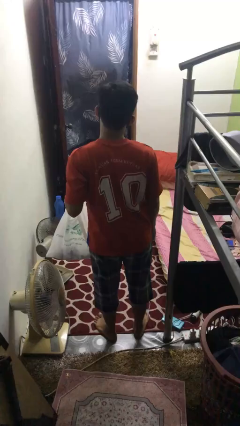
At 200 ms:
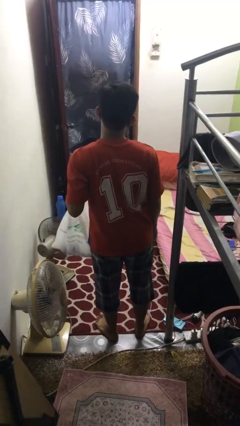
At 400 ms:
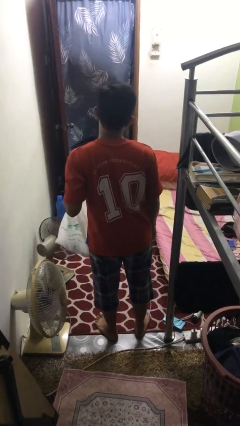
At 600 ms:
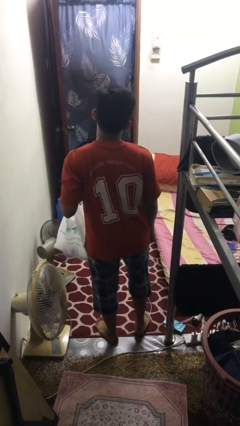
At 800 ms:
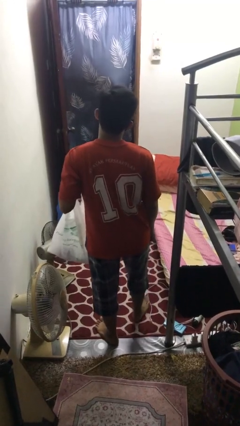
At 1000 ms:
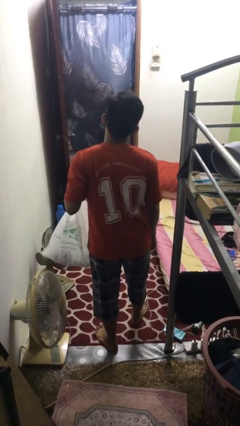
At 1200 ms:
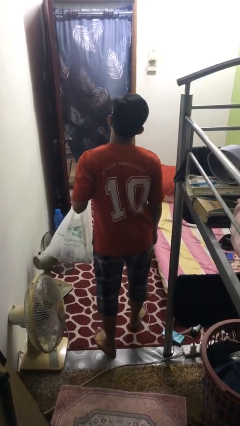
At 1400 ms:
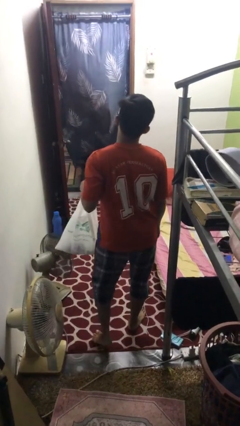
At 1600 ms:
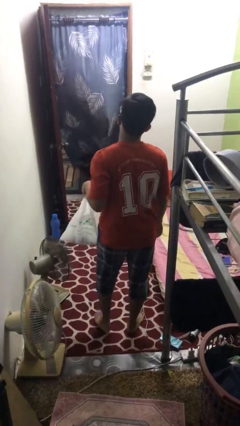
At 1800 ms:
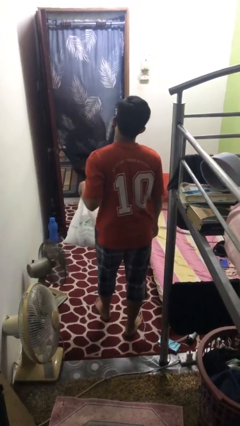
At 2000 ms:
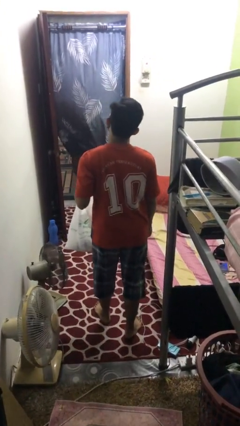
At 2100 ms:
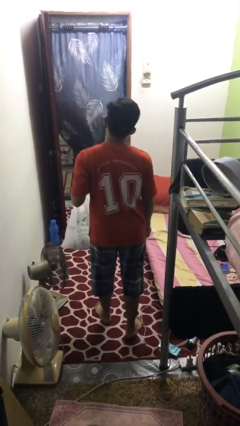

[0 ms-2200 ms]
person carries groceries

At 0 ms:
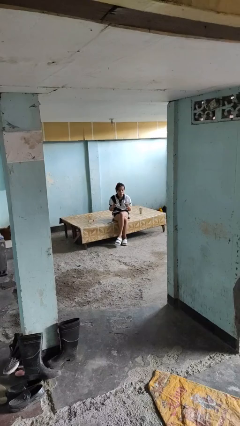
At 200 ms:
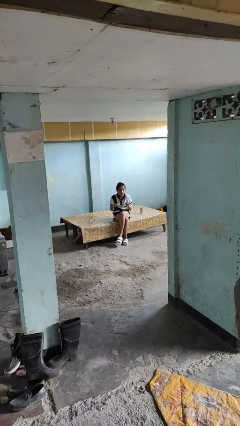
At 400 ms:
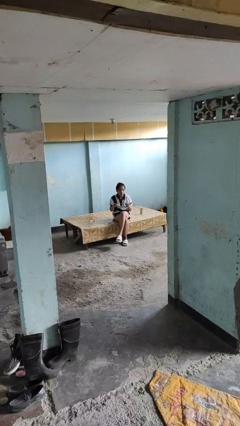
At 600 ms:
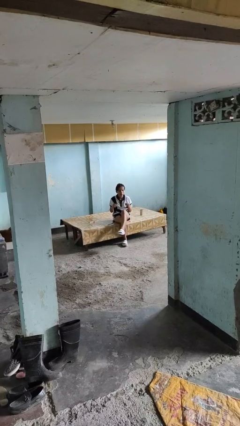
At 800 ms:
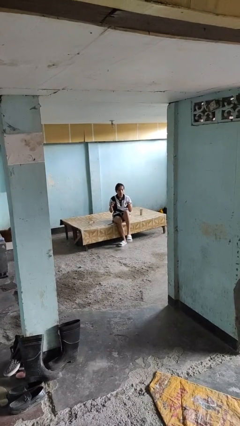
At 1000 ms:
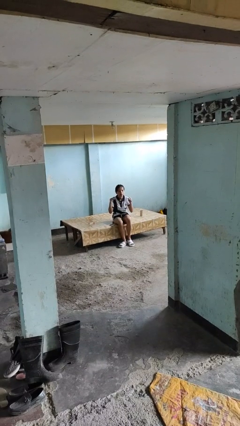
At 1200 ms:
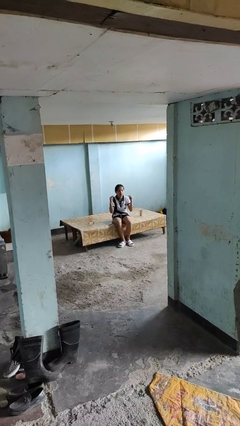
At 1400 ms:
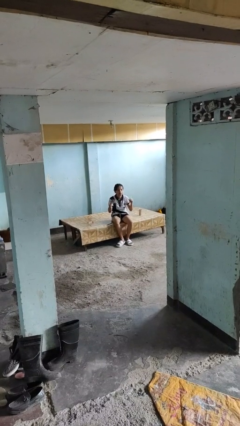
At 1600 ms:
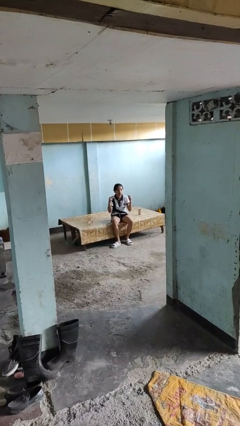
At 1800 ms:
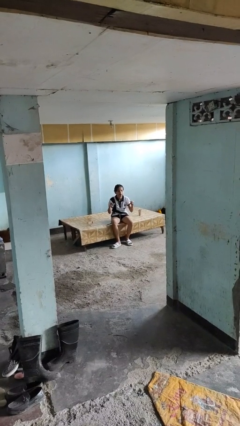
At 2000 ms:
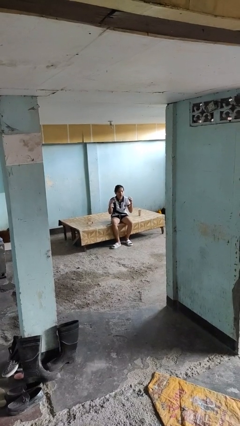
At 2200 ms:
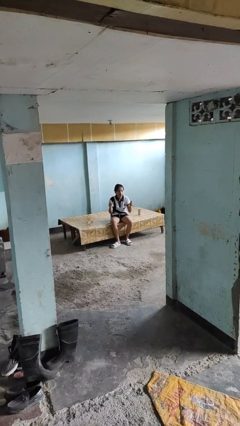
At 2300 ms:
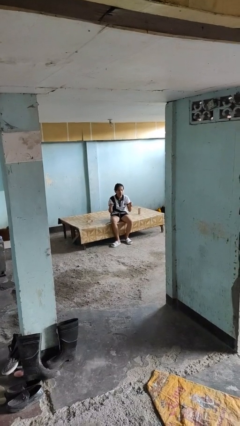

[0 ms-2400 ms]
person snaps fingers

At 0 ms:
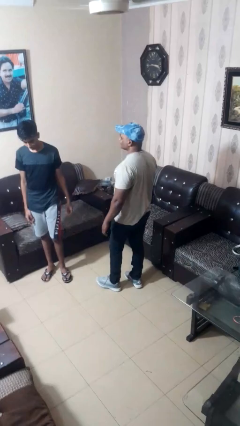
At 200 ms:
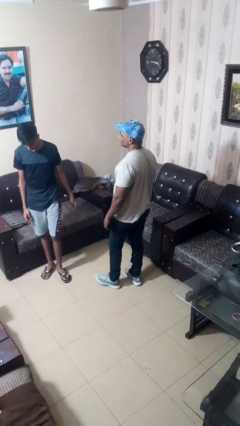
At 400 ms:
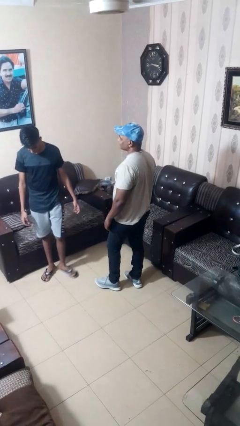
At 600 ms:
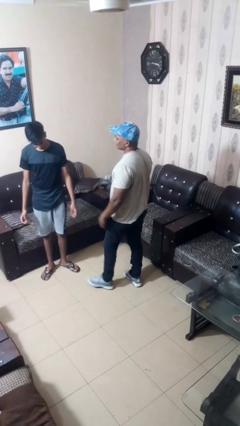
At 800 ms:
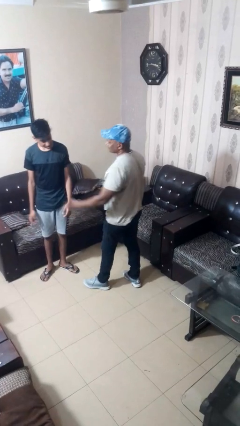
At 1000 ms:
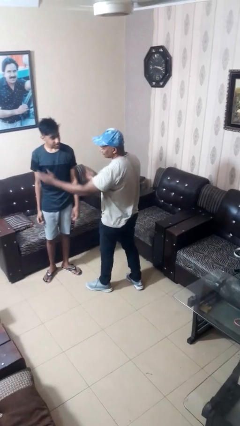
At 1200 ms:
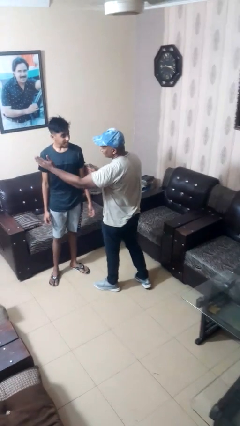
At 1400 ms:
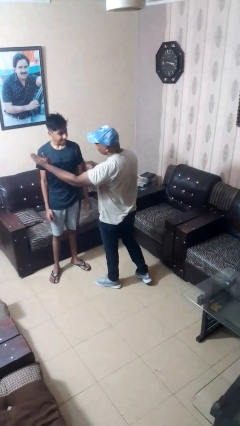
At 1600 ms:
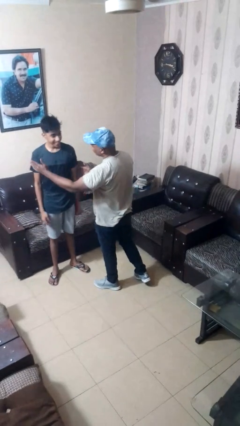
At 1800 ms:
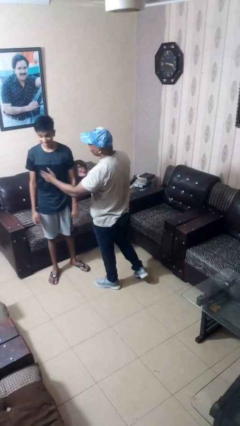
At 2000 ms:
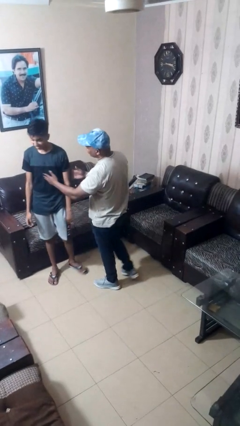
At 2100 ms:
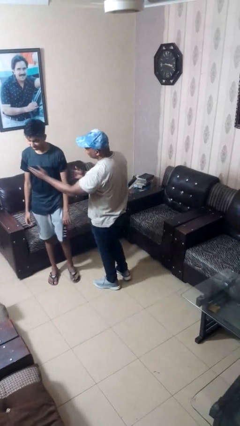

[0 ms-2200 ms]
person shoves person

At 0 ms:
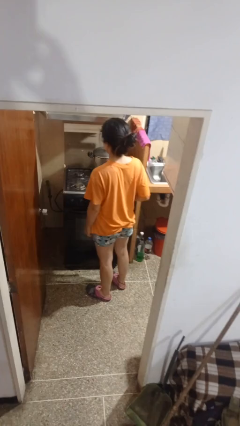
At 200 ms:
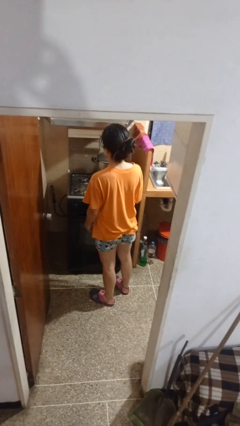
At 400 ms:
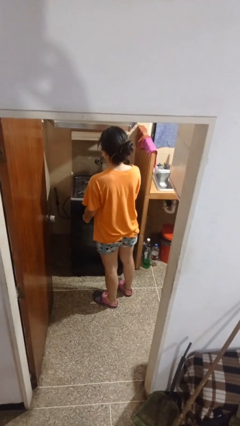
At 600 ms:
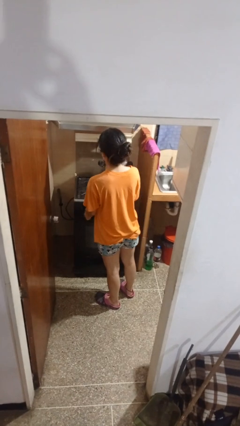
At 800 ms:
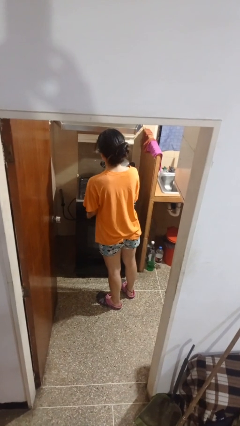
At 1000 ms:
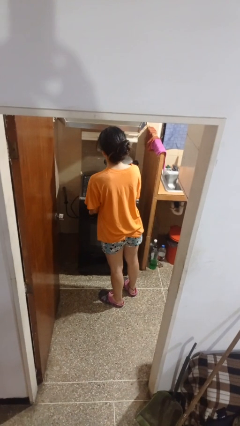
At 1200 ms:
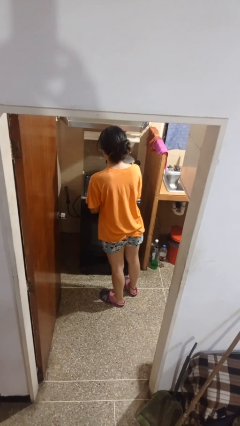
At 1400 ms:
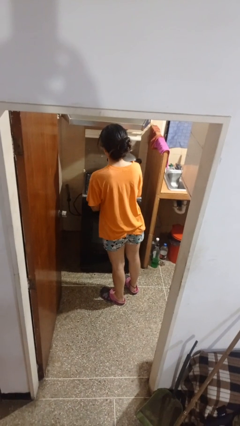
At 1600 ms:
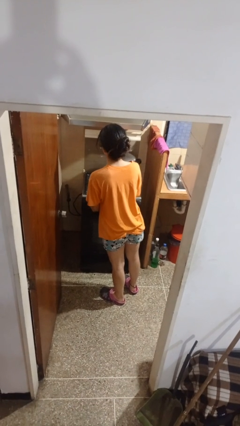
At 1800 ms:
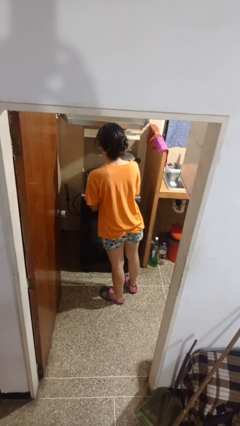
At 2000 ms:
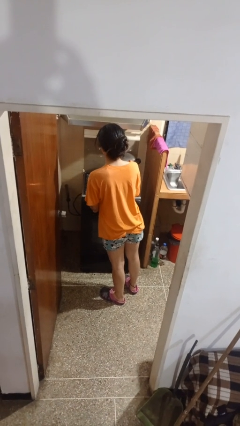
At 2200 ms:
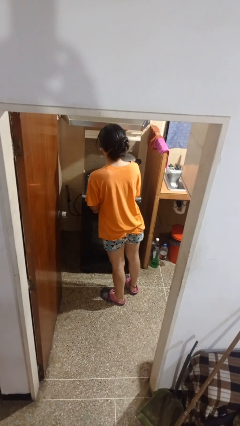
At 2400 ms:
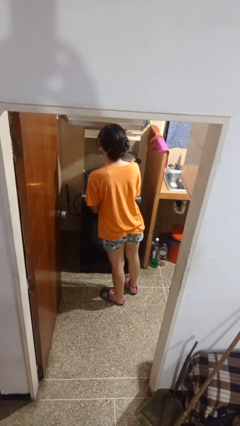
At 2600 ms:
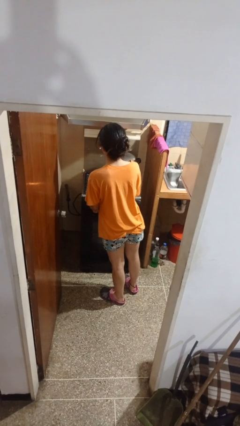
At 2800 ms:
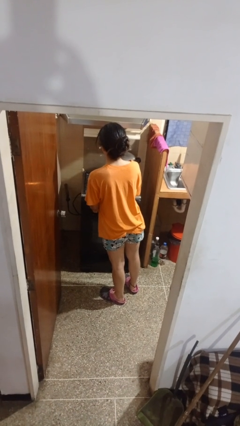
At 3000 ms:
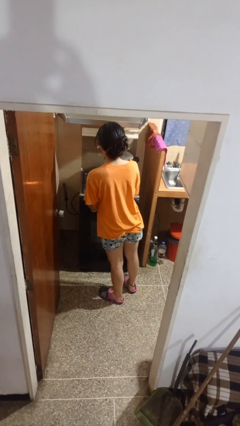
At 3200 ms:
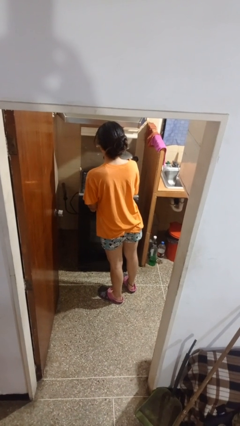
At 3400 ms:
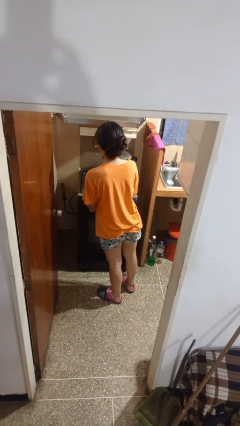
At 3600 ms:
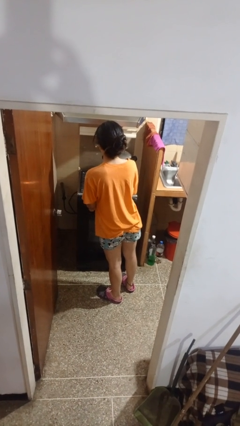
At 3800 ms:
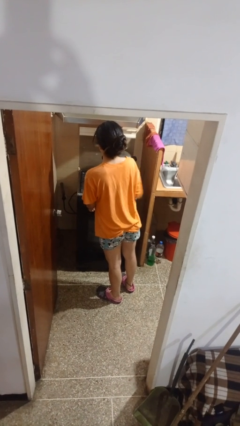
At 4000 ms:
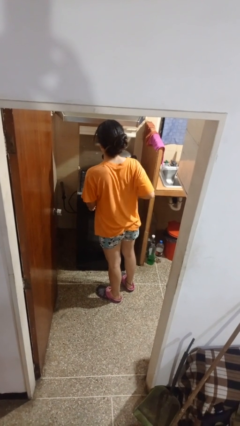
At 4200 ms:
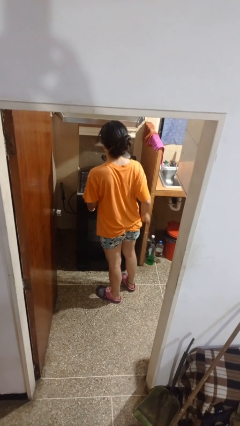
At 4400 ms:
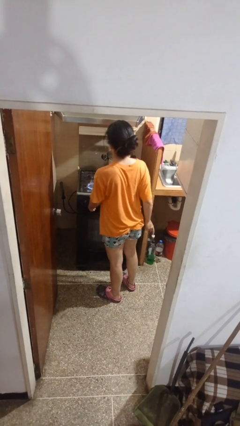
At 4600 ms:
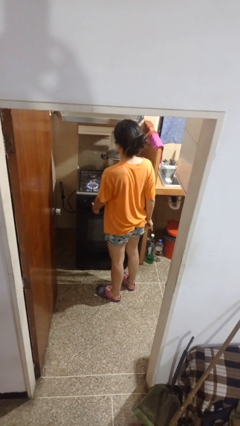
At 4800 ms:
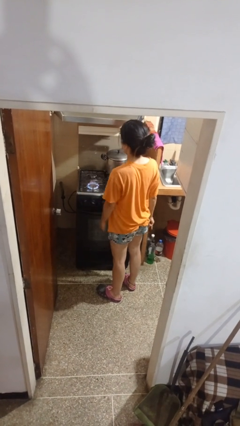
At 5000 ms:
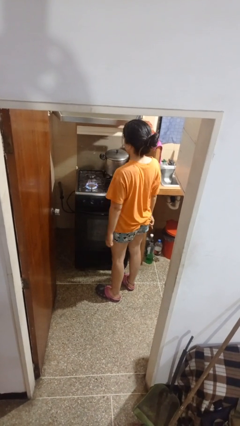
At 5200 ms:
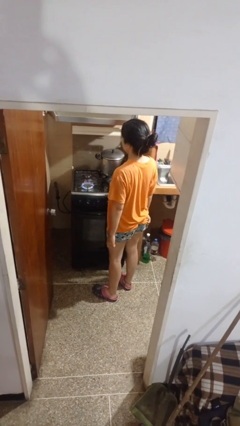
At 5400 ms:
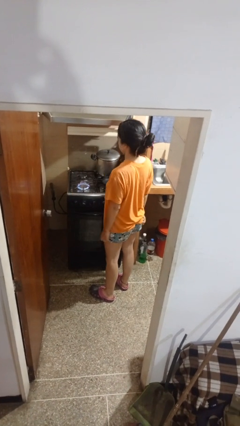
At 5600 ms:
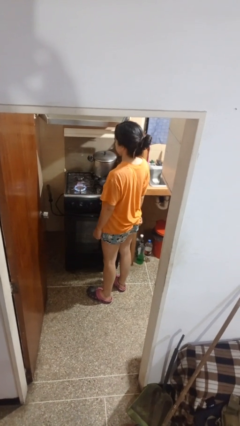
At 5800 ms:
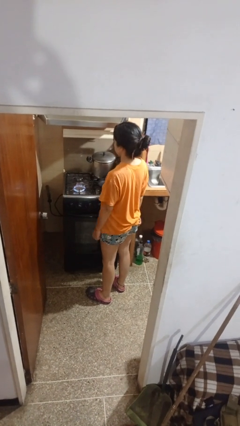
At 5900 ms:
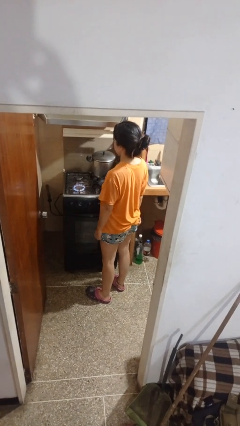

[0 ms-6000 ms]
person turns on stovetop

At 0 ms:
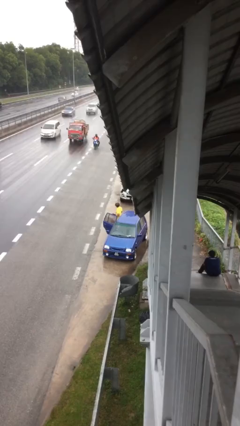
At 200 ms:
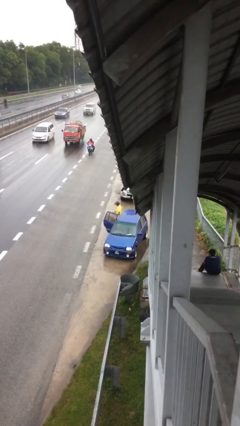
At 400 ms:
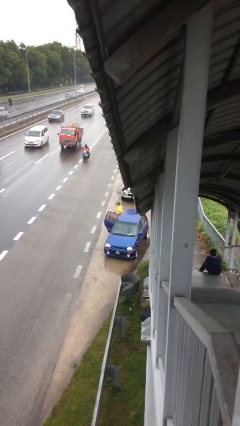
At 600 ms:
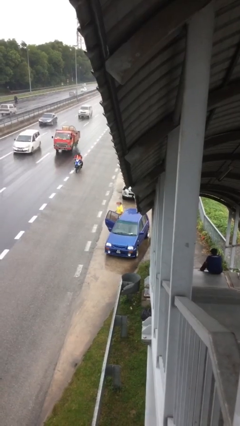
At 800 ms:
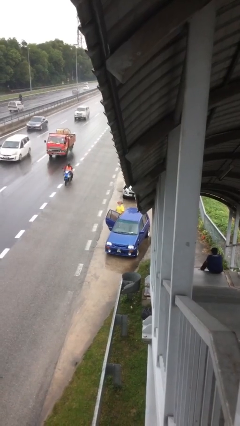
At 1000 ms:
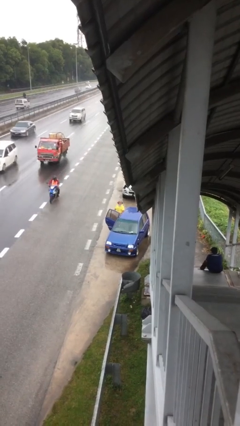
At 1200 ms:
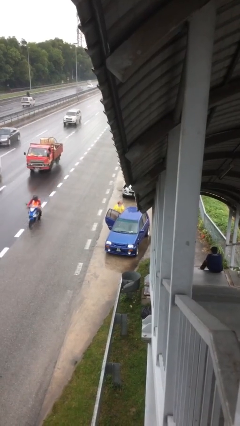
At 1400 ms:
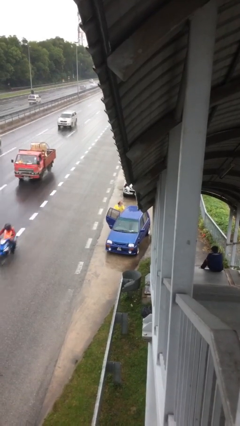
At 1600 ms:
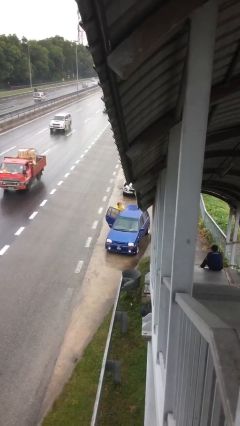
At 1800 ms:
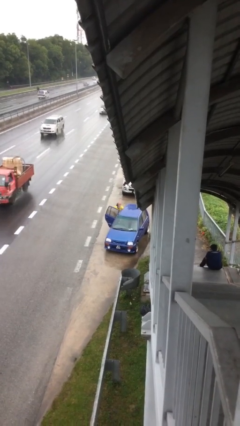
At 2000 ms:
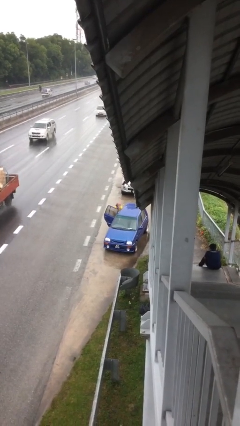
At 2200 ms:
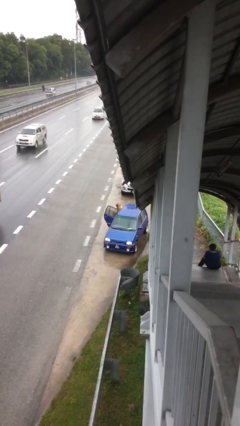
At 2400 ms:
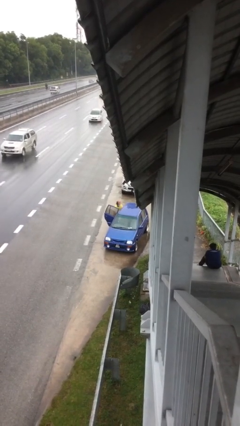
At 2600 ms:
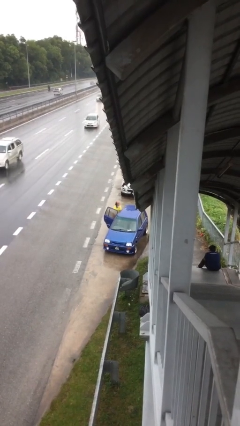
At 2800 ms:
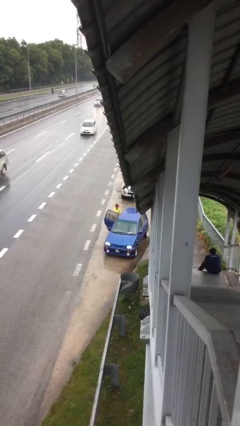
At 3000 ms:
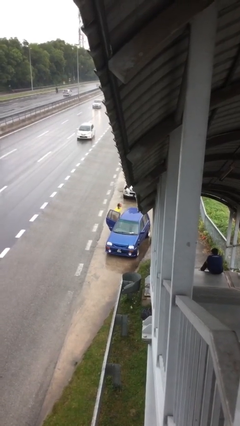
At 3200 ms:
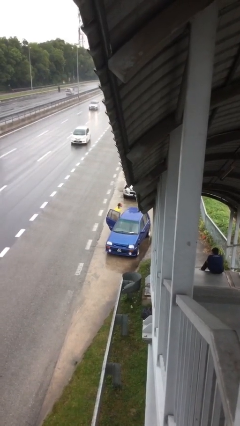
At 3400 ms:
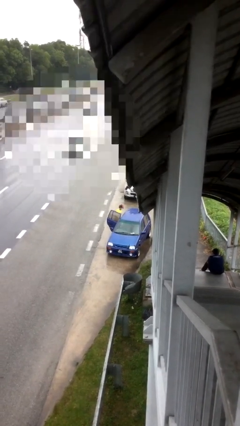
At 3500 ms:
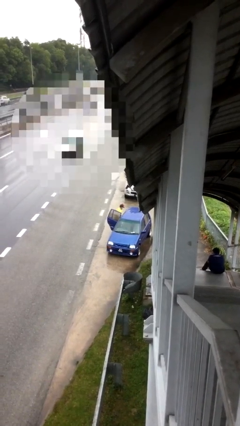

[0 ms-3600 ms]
person loads car

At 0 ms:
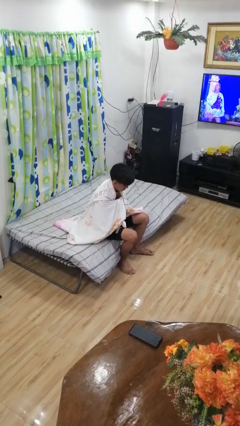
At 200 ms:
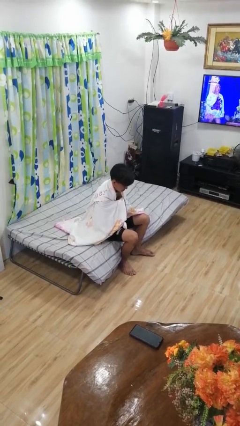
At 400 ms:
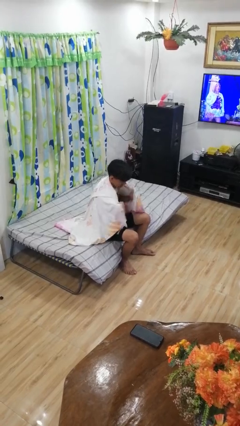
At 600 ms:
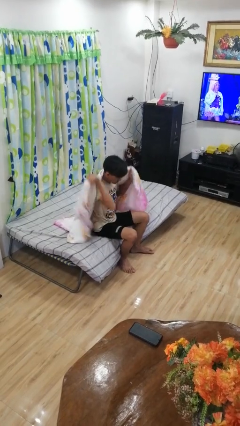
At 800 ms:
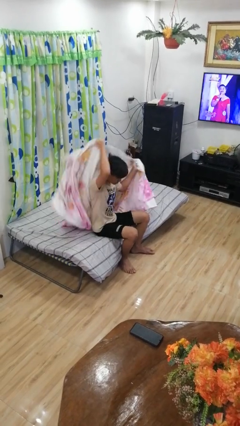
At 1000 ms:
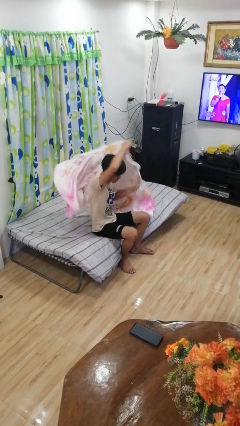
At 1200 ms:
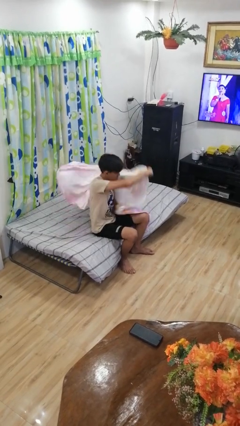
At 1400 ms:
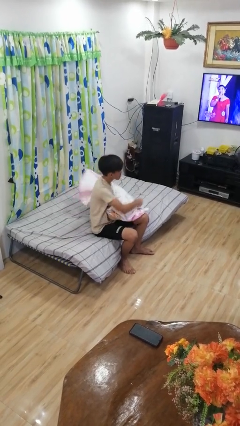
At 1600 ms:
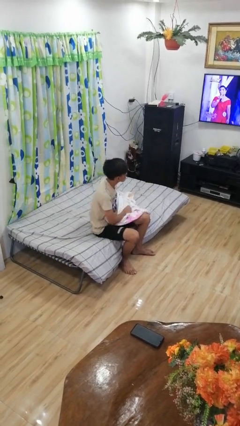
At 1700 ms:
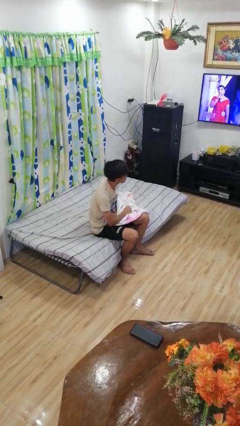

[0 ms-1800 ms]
person uncovers with blanket
